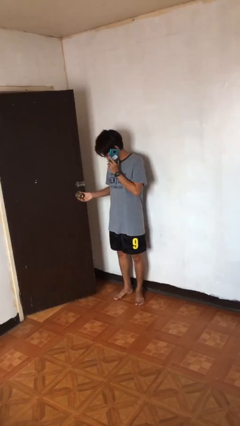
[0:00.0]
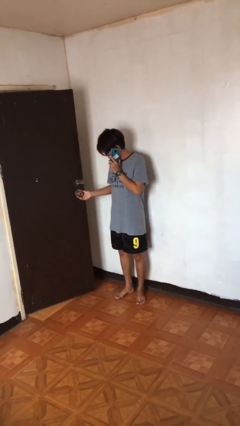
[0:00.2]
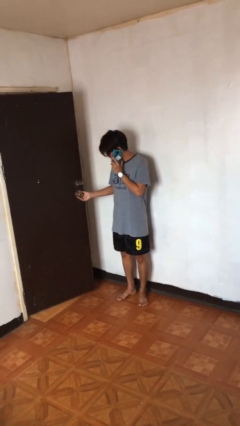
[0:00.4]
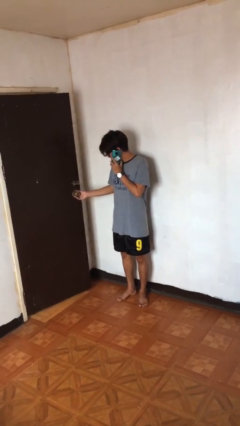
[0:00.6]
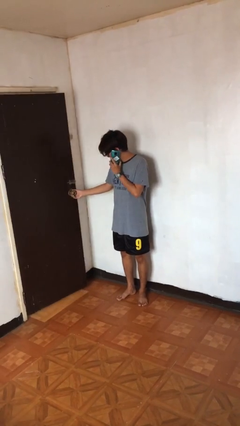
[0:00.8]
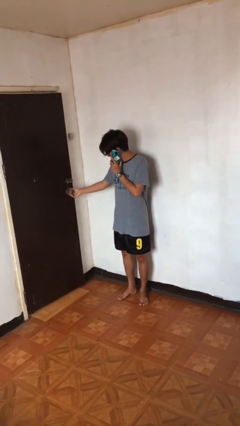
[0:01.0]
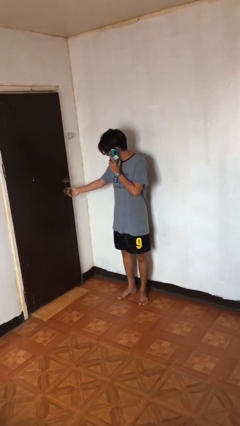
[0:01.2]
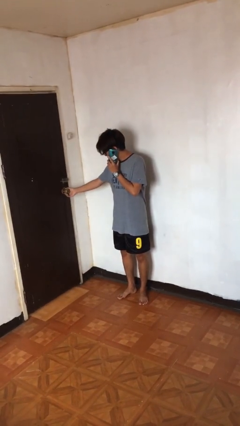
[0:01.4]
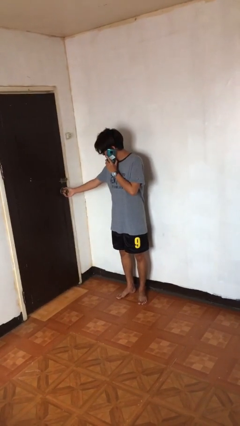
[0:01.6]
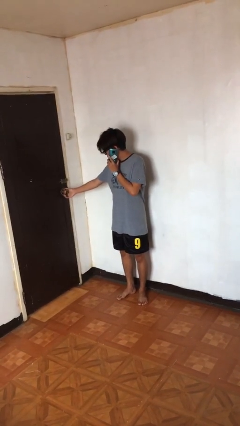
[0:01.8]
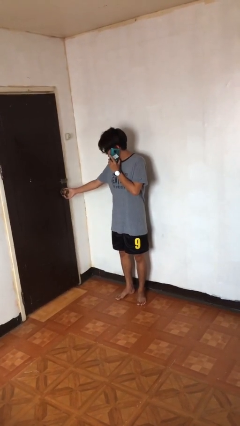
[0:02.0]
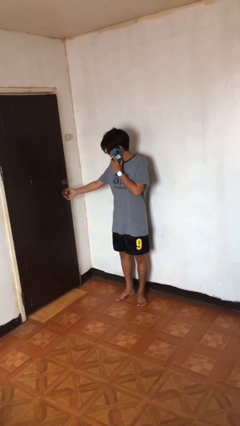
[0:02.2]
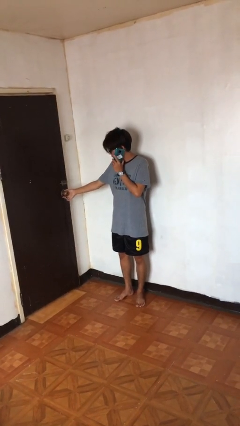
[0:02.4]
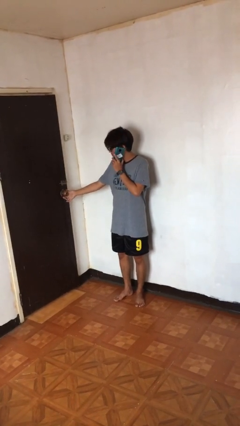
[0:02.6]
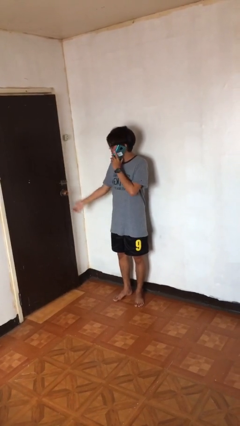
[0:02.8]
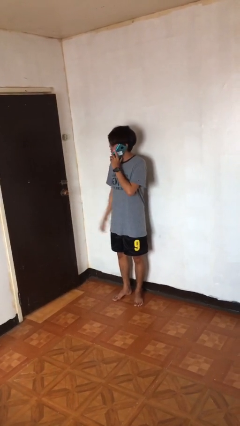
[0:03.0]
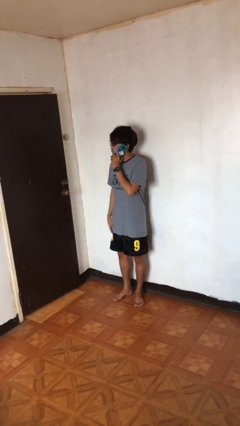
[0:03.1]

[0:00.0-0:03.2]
person closes facility door

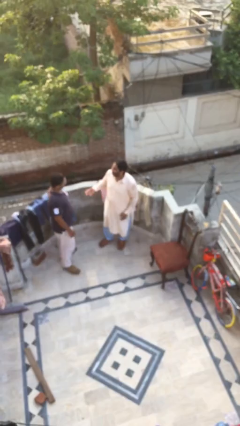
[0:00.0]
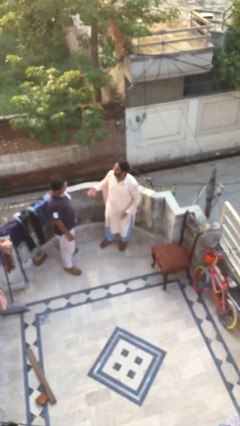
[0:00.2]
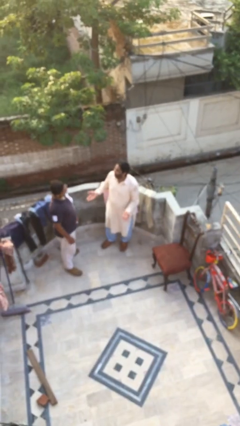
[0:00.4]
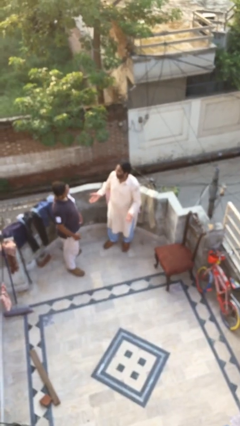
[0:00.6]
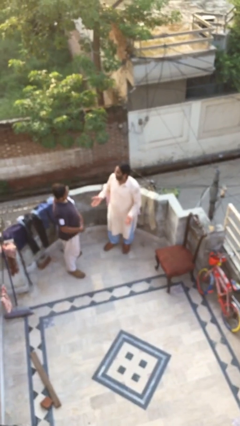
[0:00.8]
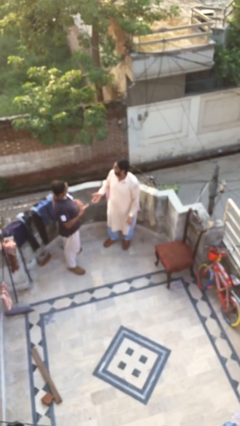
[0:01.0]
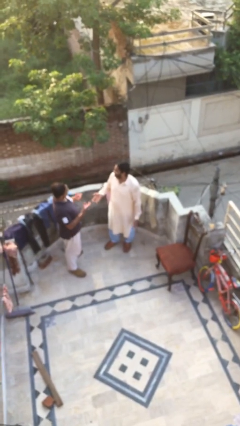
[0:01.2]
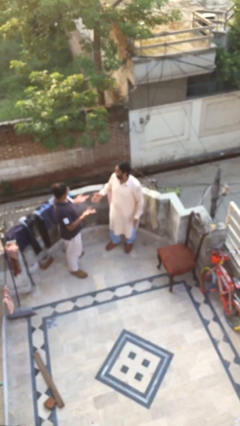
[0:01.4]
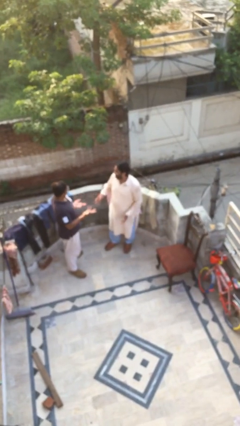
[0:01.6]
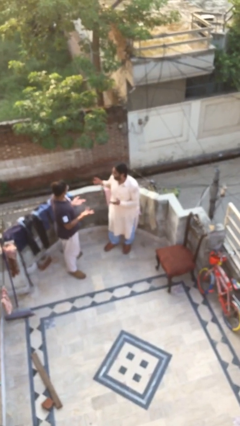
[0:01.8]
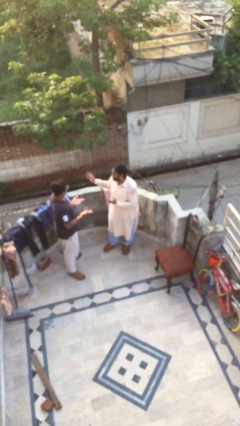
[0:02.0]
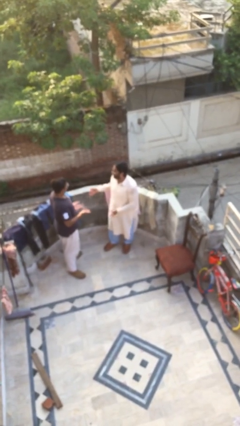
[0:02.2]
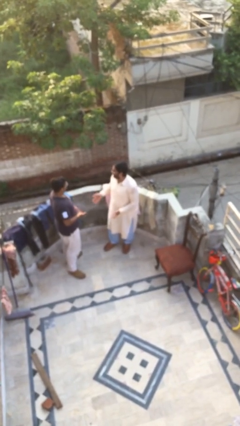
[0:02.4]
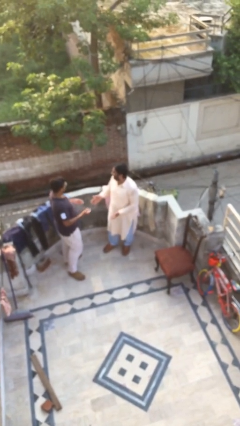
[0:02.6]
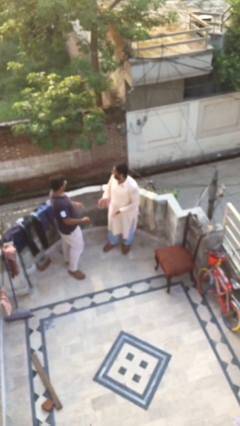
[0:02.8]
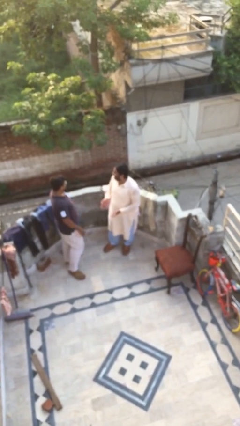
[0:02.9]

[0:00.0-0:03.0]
person talks to person

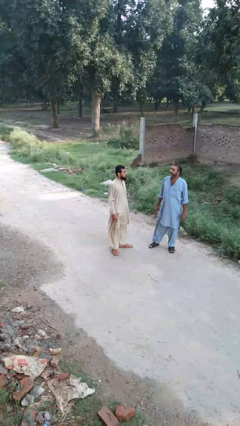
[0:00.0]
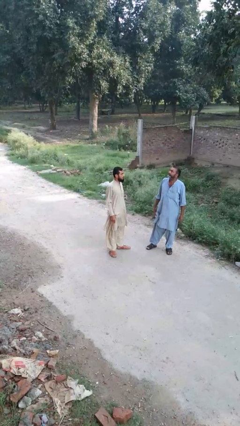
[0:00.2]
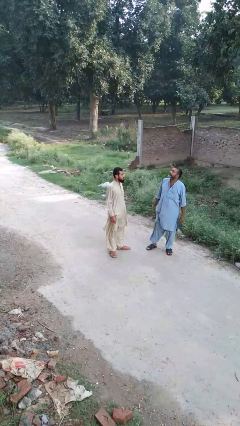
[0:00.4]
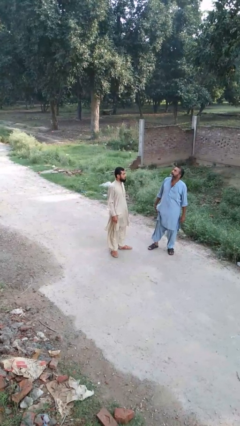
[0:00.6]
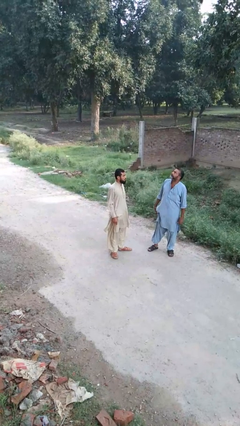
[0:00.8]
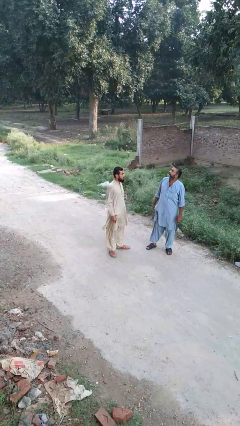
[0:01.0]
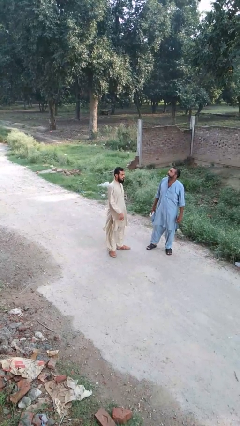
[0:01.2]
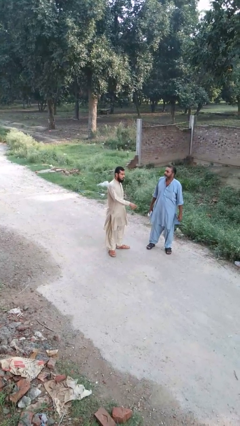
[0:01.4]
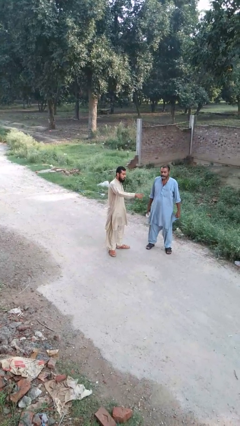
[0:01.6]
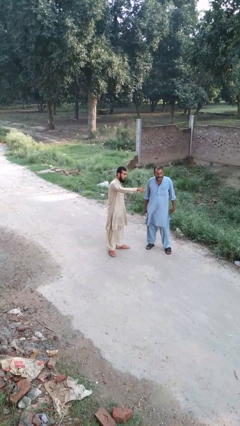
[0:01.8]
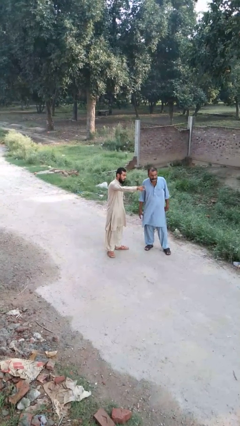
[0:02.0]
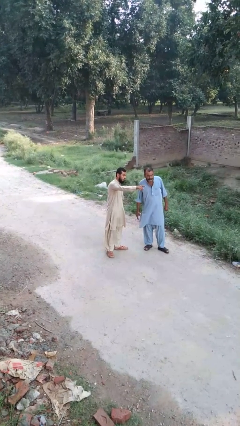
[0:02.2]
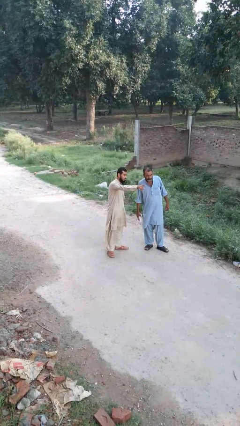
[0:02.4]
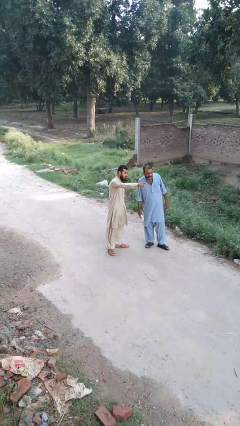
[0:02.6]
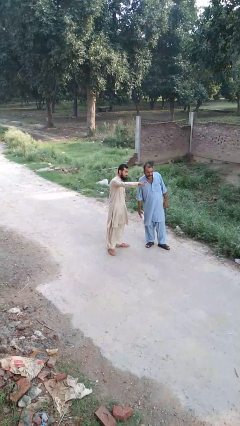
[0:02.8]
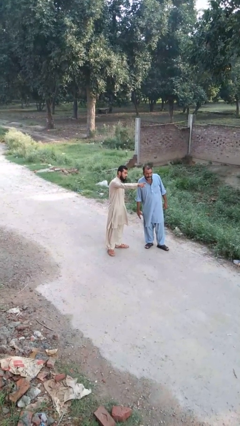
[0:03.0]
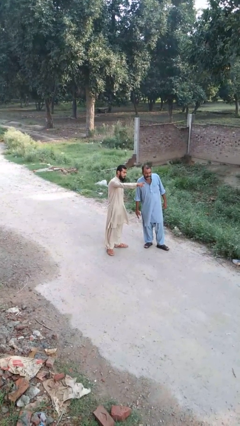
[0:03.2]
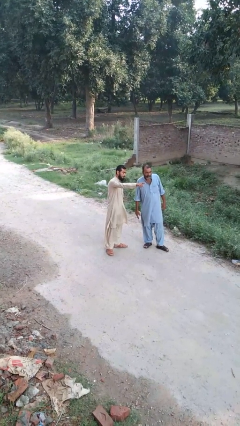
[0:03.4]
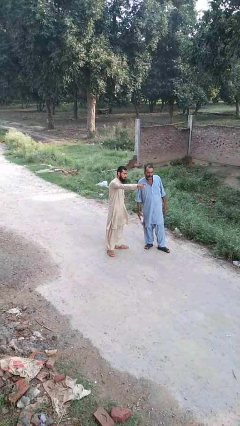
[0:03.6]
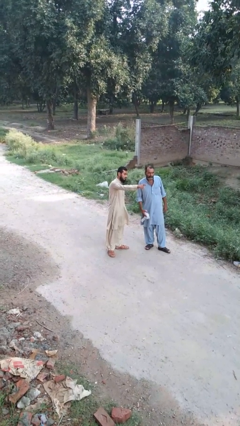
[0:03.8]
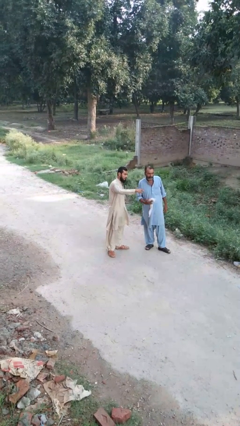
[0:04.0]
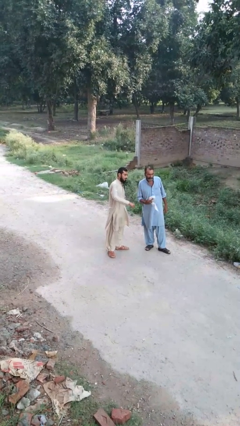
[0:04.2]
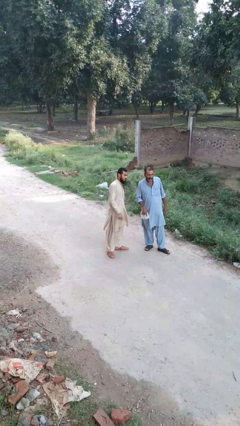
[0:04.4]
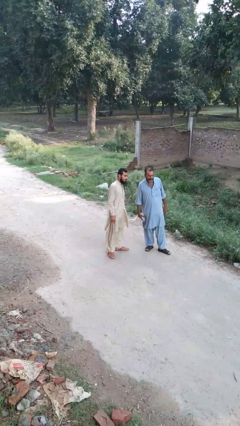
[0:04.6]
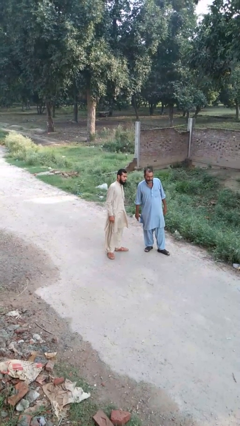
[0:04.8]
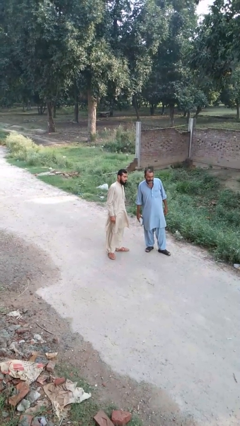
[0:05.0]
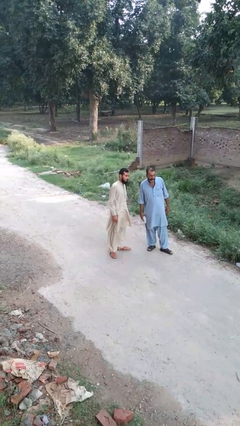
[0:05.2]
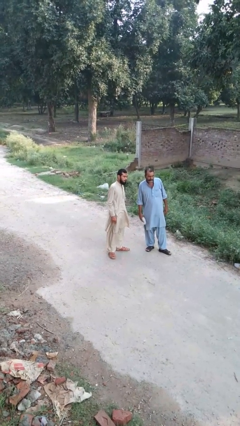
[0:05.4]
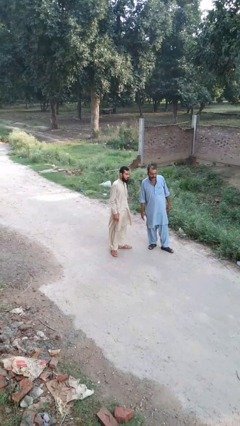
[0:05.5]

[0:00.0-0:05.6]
person points at person

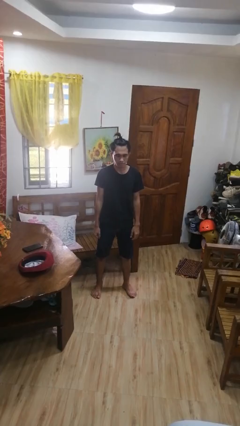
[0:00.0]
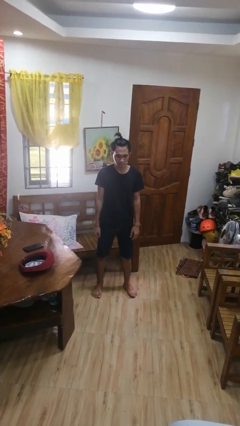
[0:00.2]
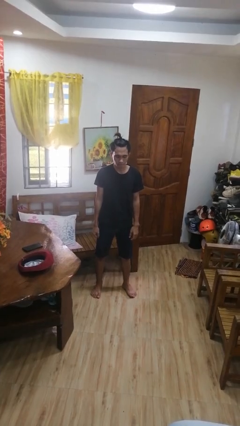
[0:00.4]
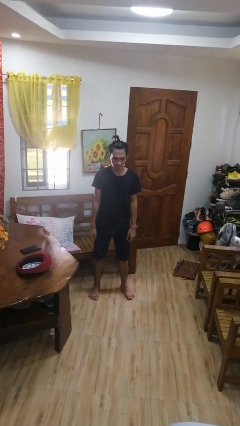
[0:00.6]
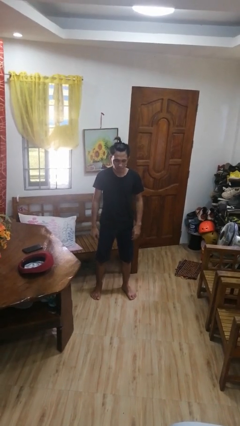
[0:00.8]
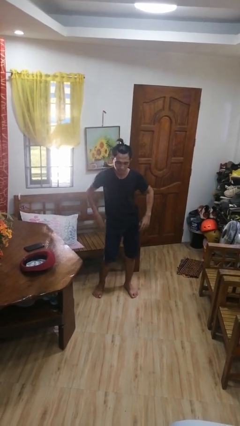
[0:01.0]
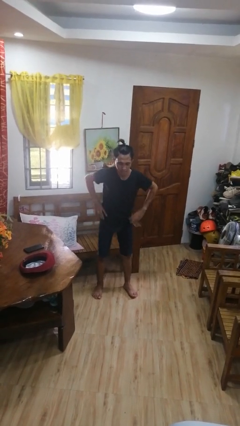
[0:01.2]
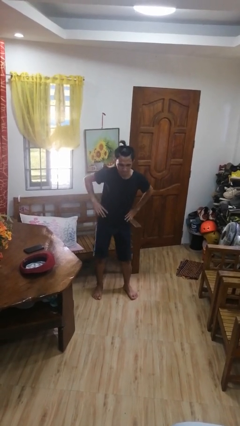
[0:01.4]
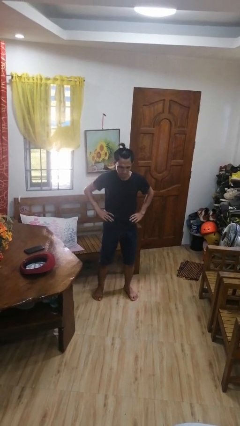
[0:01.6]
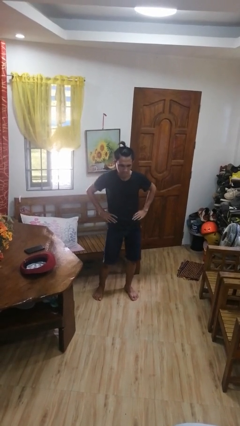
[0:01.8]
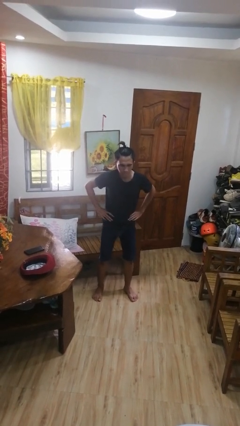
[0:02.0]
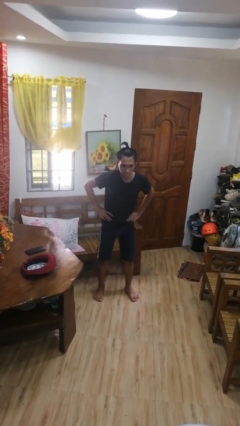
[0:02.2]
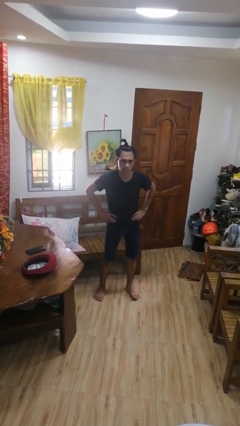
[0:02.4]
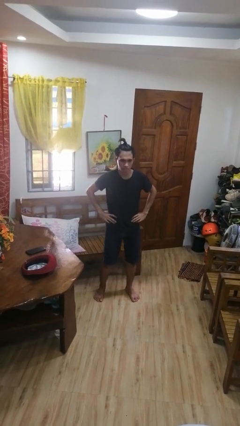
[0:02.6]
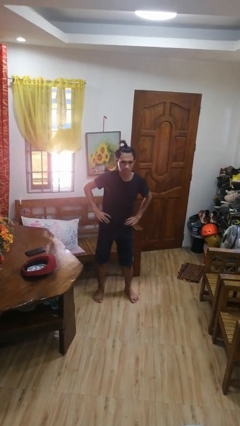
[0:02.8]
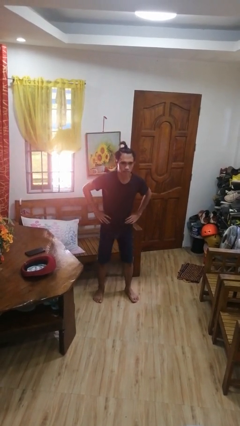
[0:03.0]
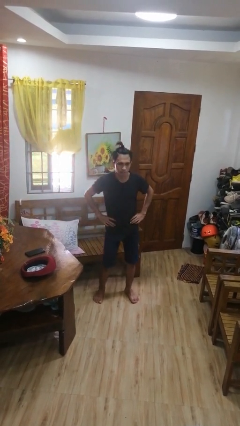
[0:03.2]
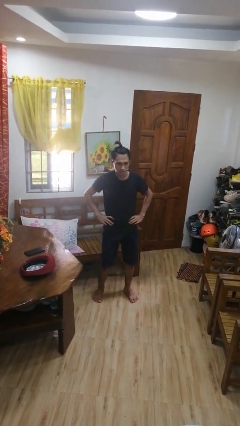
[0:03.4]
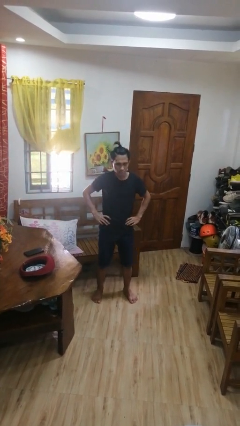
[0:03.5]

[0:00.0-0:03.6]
person wiggles hips

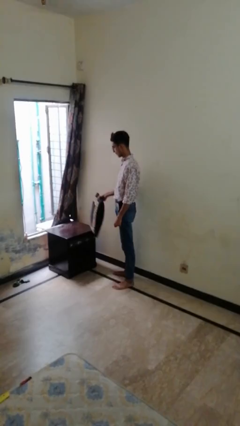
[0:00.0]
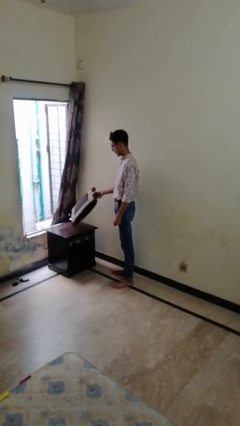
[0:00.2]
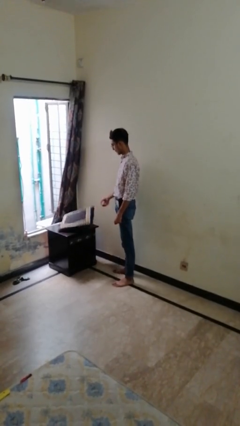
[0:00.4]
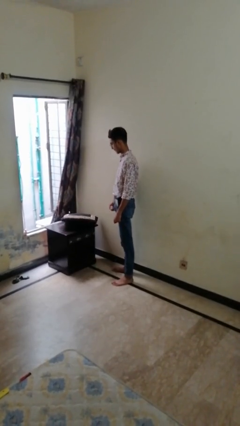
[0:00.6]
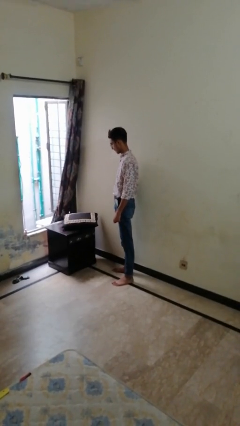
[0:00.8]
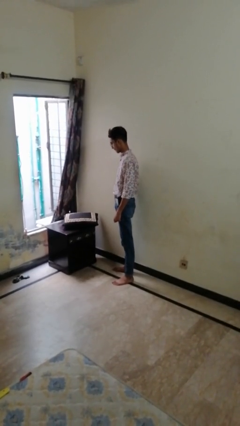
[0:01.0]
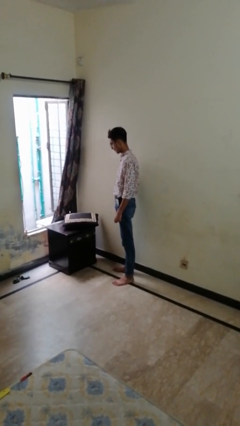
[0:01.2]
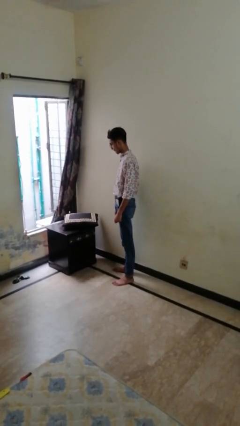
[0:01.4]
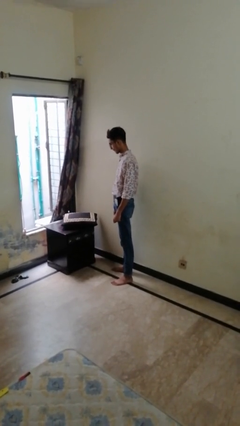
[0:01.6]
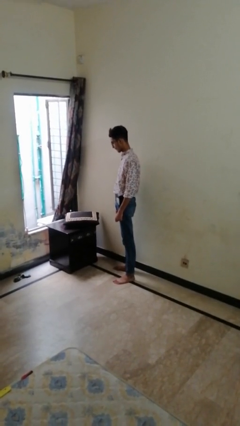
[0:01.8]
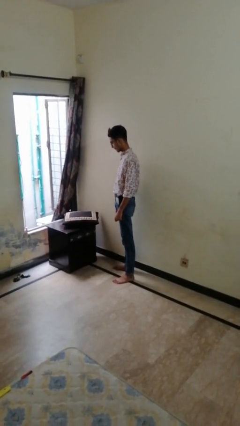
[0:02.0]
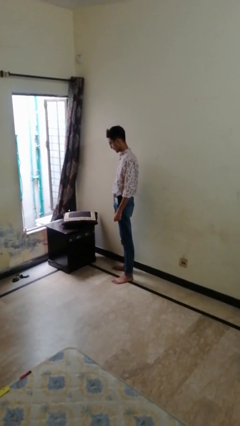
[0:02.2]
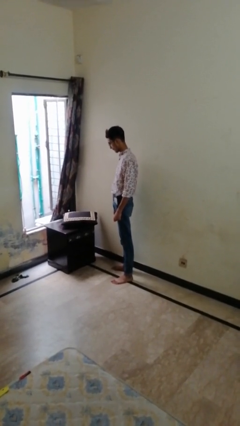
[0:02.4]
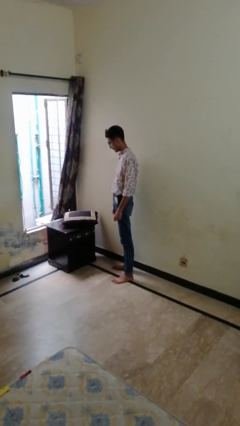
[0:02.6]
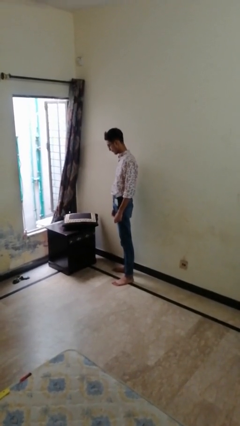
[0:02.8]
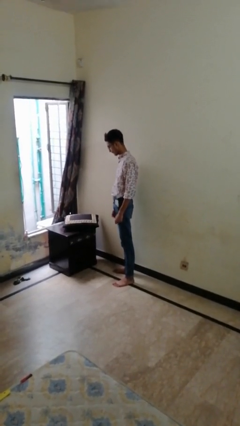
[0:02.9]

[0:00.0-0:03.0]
person throws object on table
